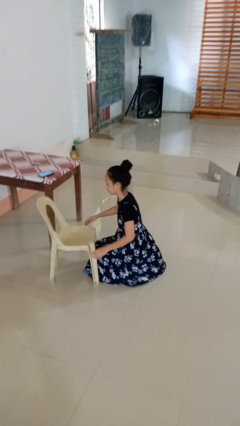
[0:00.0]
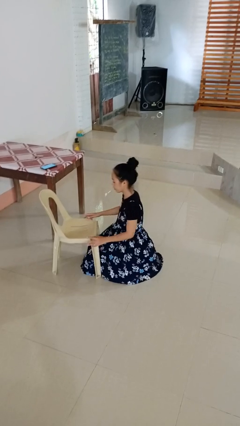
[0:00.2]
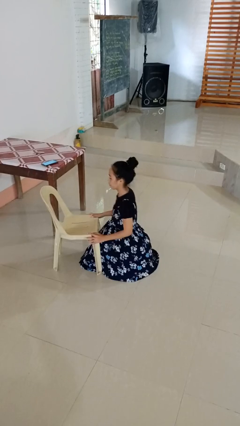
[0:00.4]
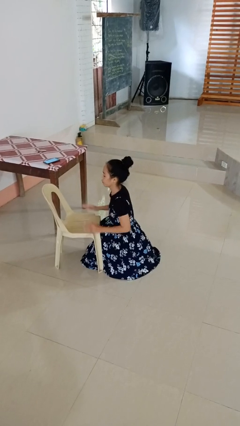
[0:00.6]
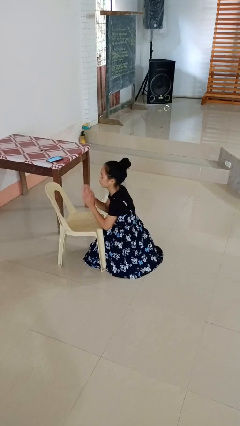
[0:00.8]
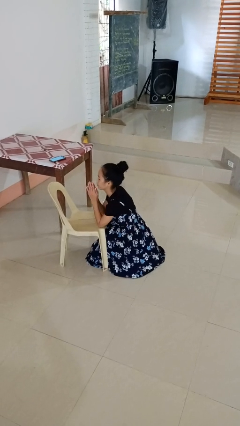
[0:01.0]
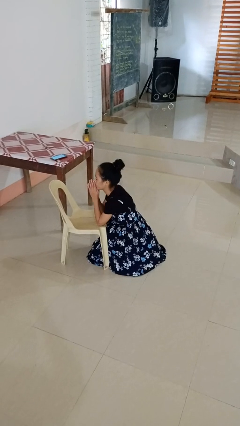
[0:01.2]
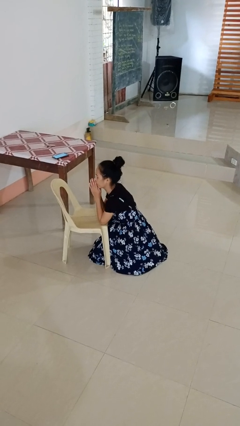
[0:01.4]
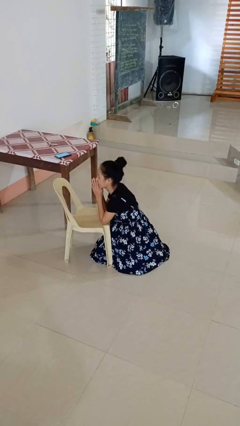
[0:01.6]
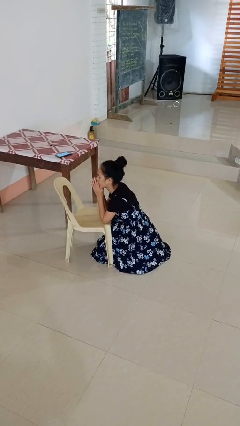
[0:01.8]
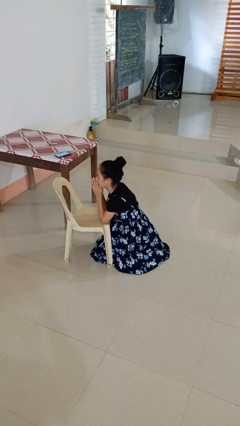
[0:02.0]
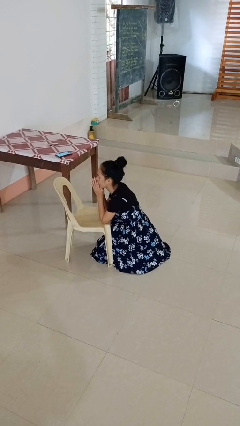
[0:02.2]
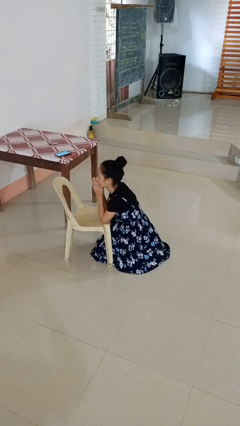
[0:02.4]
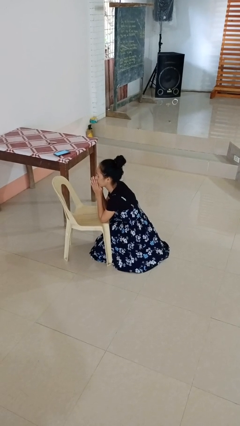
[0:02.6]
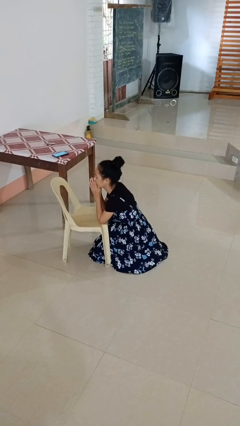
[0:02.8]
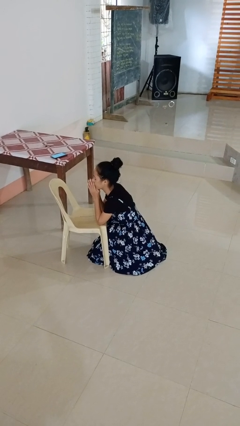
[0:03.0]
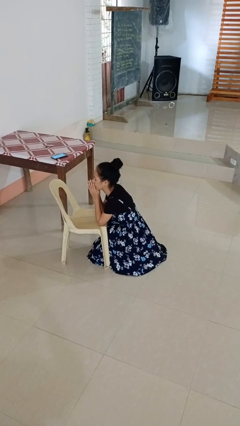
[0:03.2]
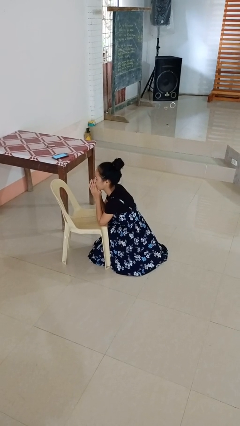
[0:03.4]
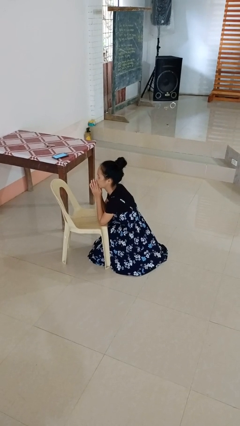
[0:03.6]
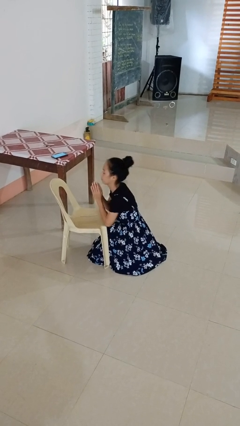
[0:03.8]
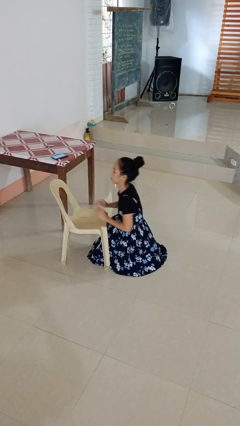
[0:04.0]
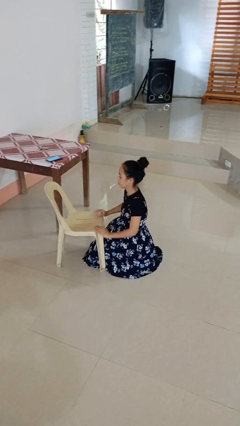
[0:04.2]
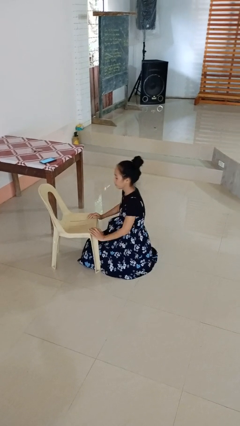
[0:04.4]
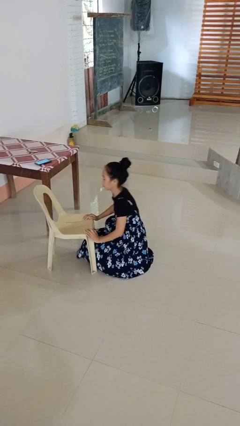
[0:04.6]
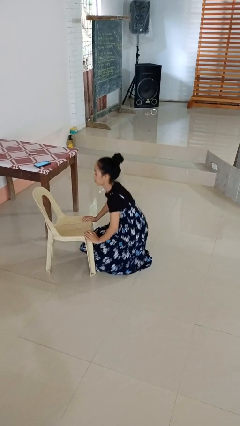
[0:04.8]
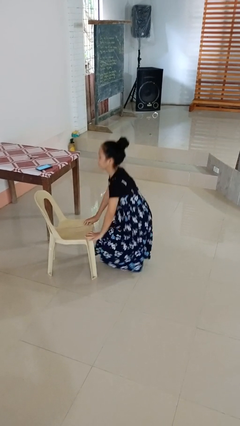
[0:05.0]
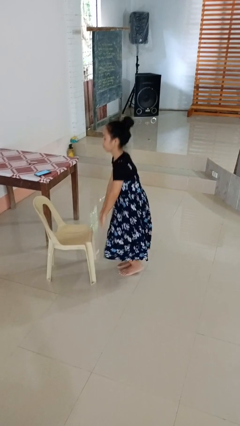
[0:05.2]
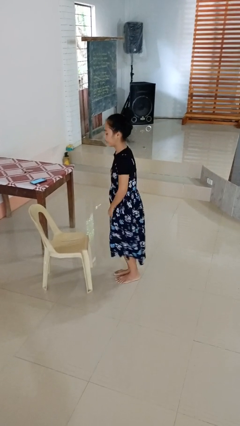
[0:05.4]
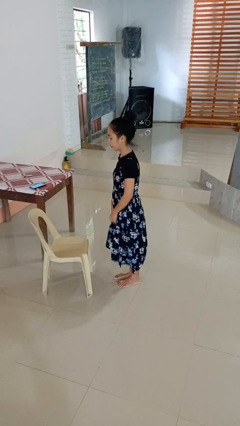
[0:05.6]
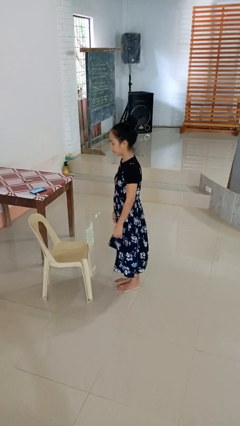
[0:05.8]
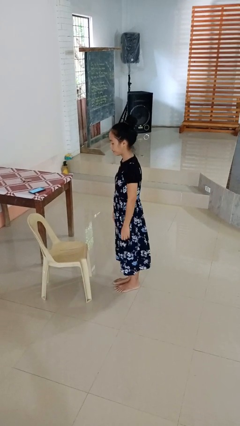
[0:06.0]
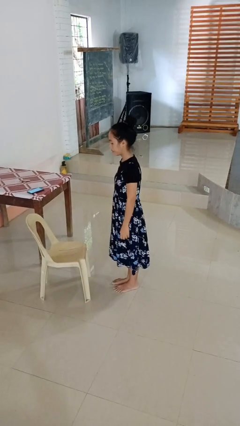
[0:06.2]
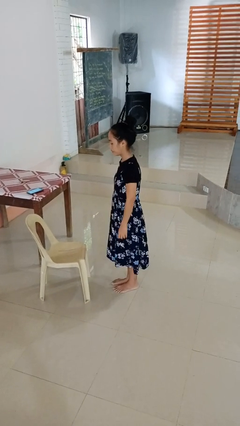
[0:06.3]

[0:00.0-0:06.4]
person prays

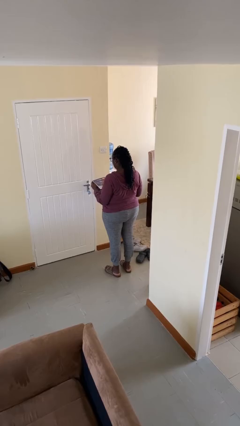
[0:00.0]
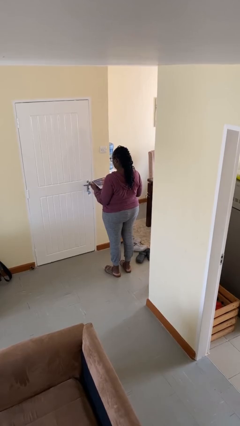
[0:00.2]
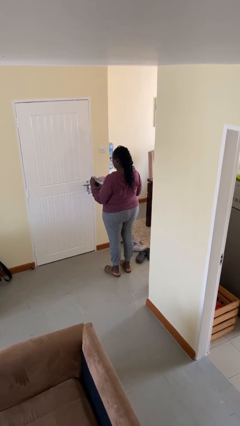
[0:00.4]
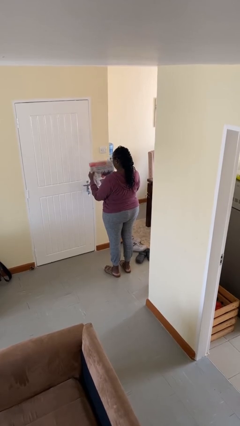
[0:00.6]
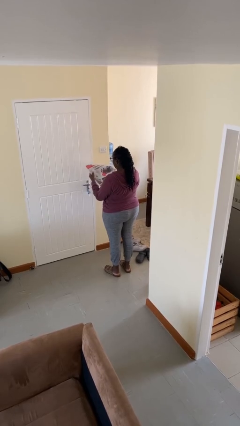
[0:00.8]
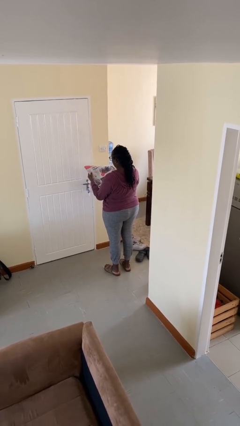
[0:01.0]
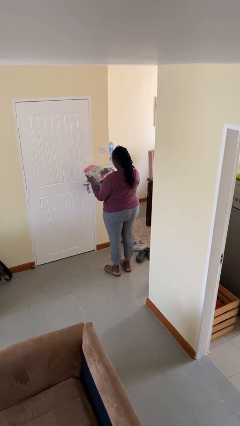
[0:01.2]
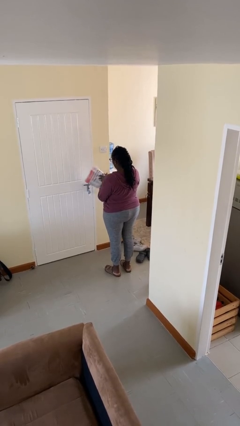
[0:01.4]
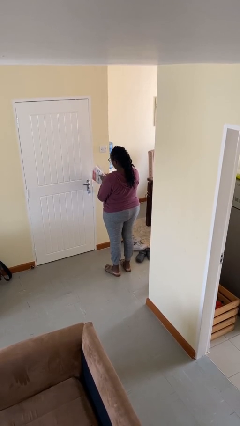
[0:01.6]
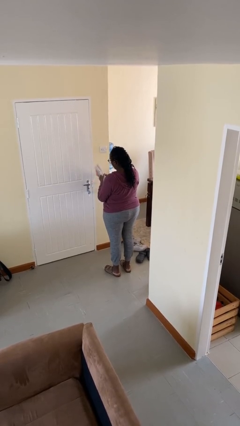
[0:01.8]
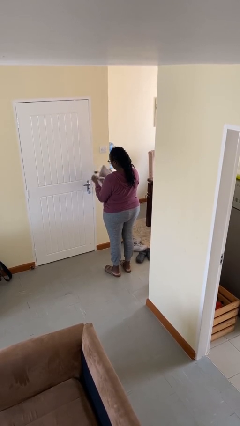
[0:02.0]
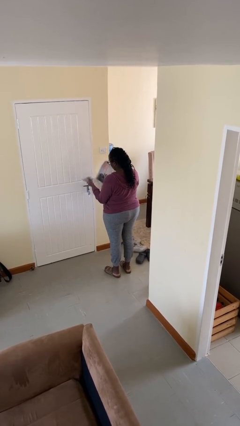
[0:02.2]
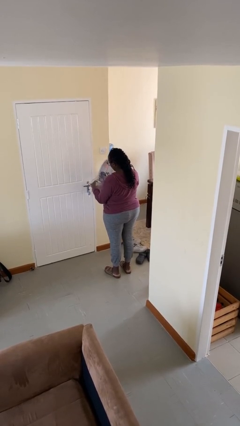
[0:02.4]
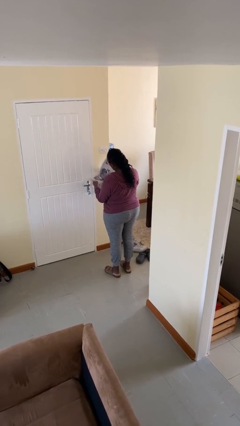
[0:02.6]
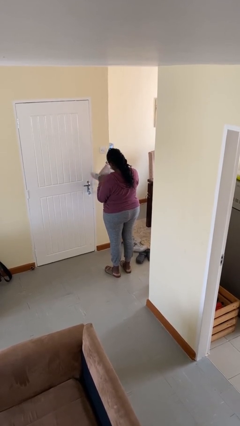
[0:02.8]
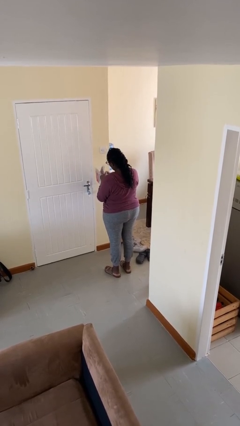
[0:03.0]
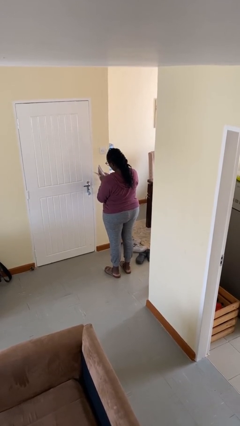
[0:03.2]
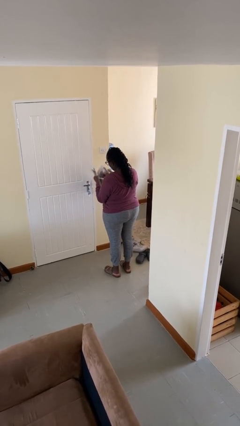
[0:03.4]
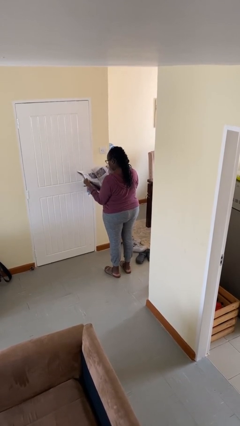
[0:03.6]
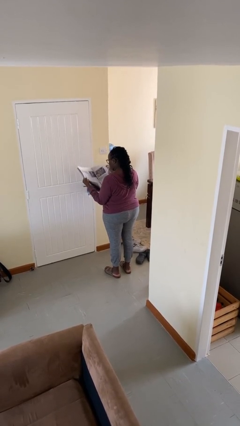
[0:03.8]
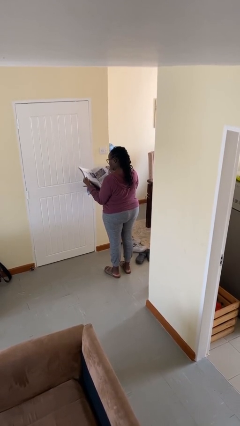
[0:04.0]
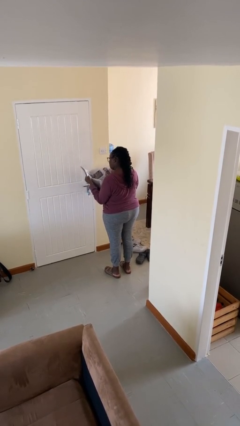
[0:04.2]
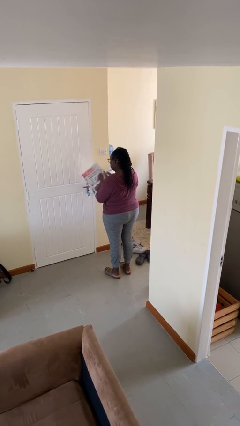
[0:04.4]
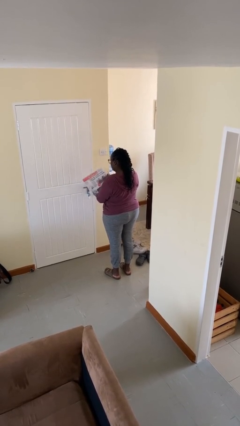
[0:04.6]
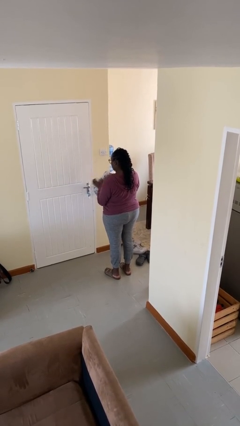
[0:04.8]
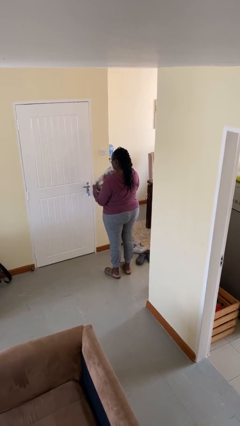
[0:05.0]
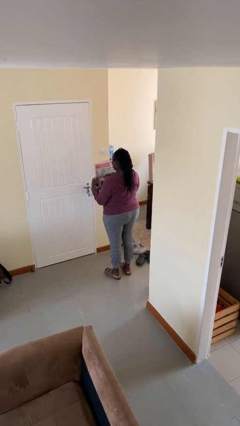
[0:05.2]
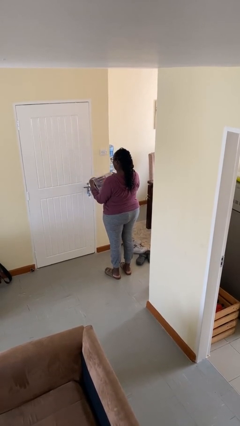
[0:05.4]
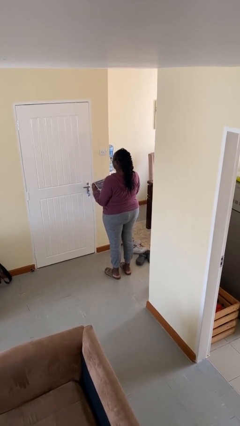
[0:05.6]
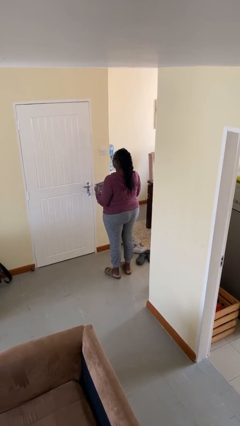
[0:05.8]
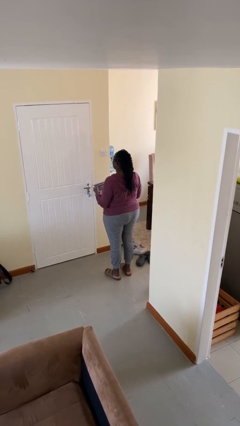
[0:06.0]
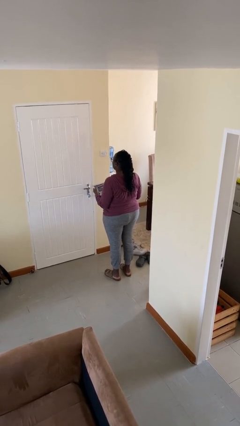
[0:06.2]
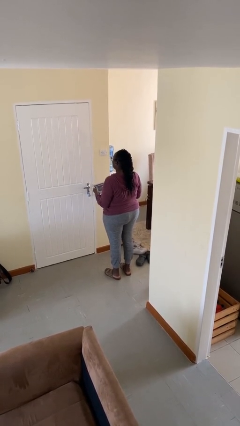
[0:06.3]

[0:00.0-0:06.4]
person reads newspaper

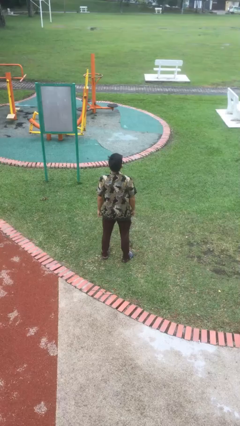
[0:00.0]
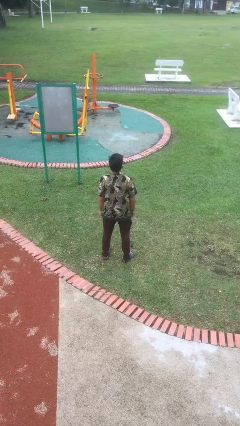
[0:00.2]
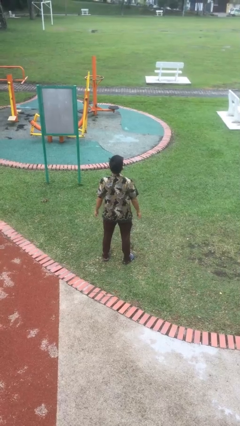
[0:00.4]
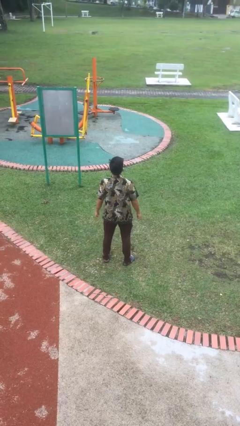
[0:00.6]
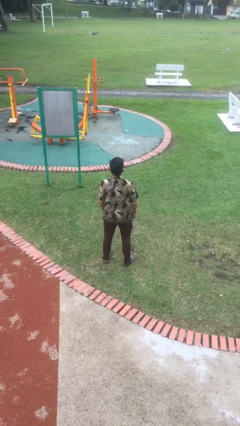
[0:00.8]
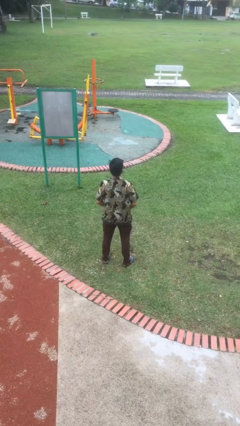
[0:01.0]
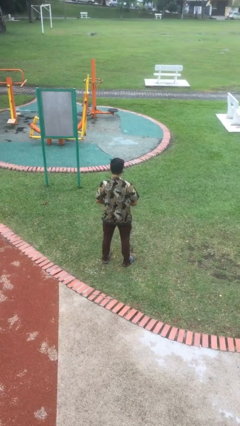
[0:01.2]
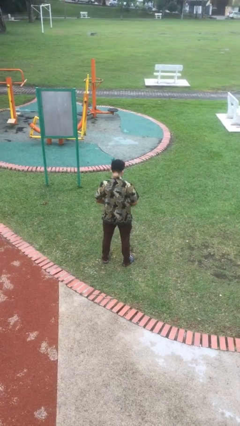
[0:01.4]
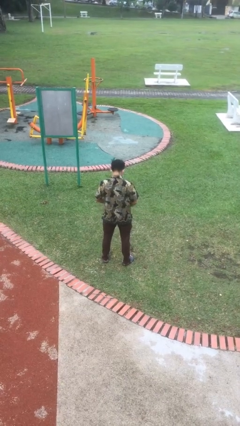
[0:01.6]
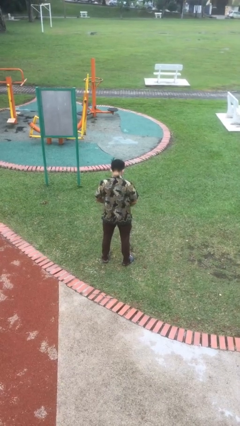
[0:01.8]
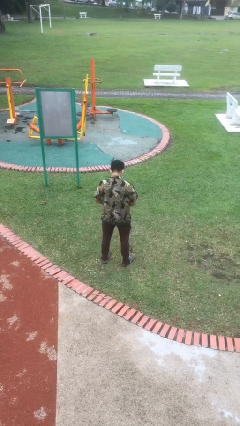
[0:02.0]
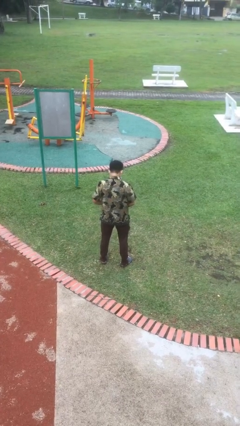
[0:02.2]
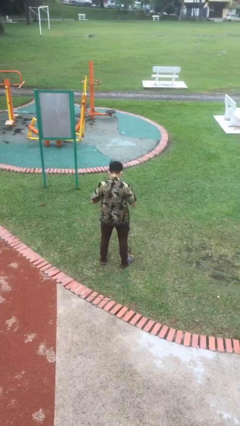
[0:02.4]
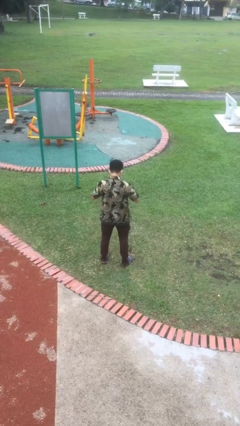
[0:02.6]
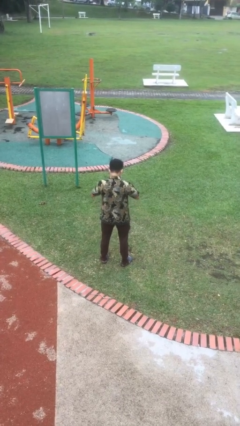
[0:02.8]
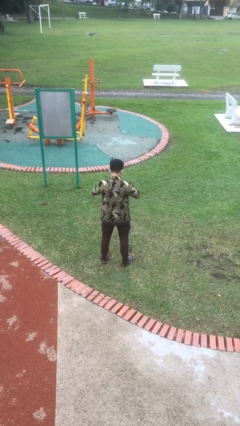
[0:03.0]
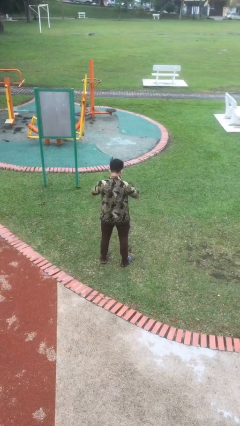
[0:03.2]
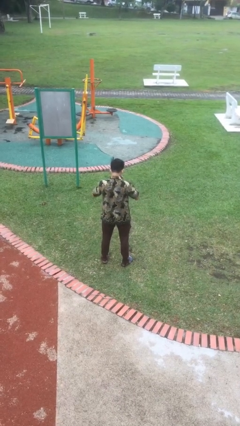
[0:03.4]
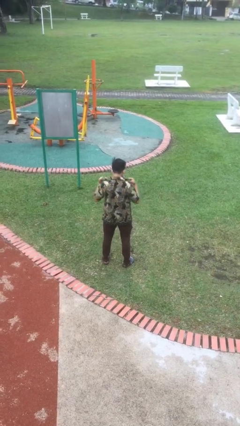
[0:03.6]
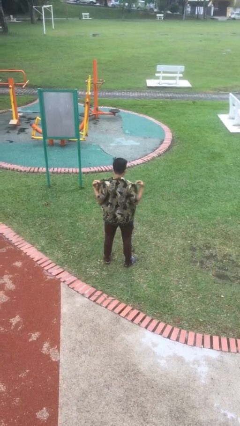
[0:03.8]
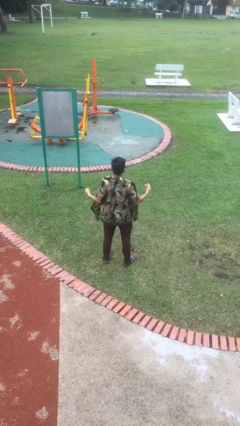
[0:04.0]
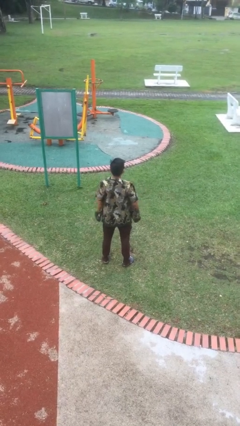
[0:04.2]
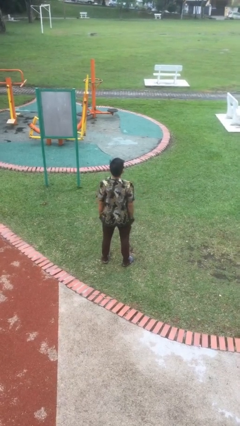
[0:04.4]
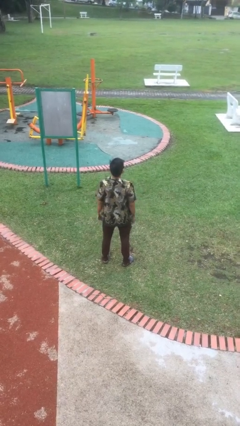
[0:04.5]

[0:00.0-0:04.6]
person unbuttons shirt

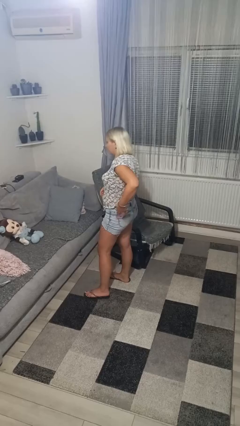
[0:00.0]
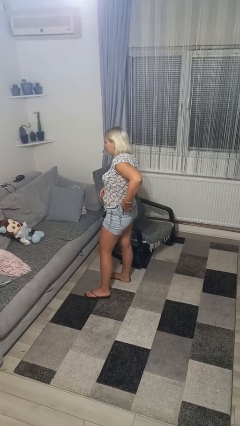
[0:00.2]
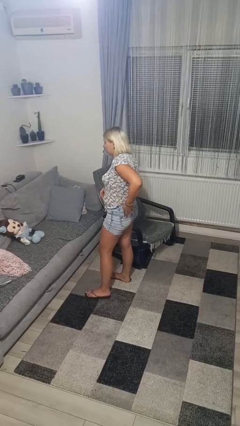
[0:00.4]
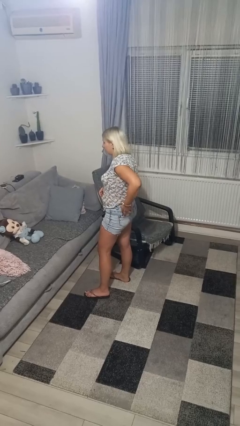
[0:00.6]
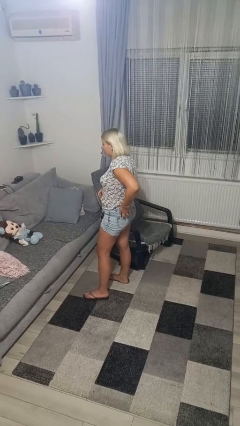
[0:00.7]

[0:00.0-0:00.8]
person puts phone into pocket
